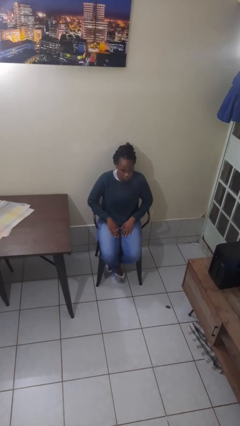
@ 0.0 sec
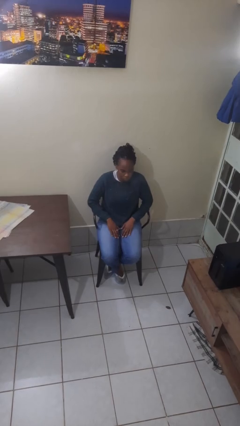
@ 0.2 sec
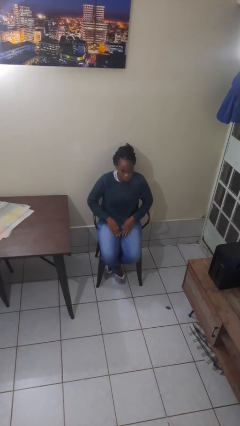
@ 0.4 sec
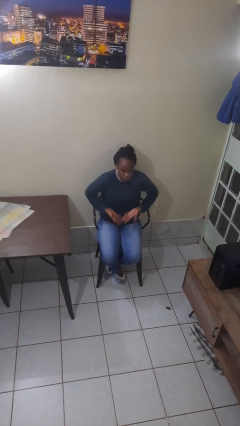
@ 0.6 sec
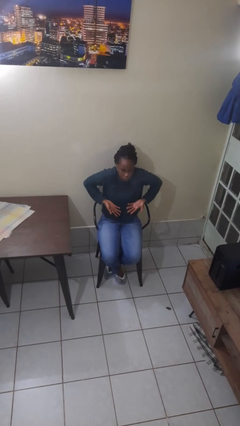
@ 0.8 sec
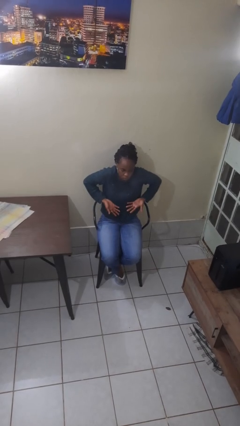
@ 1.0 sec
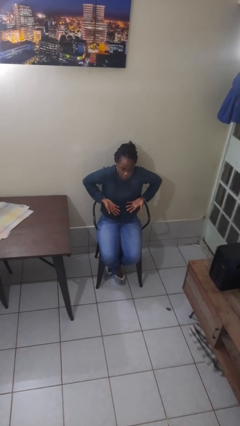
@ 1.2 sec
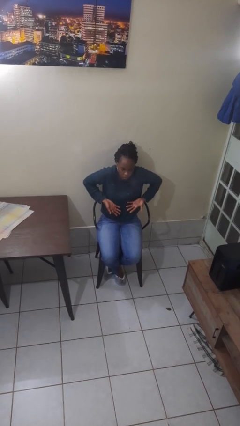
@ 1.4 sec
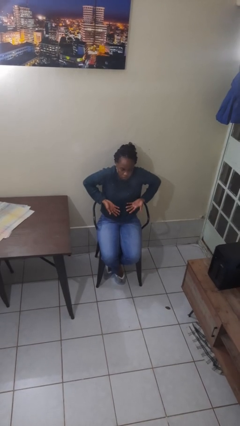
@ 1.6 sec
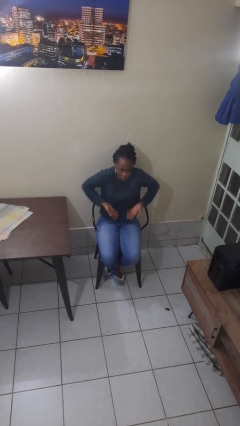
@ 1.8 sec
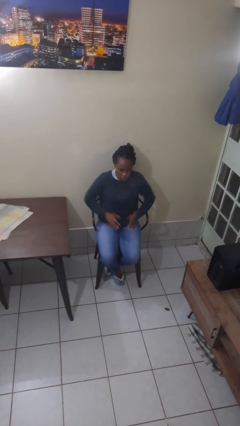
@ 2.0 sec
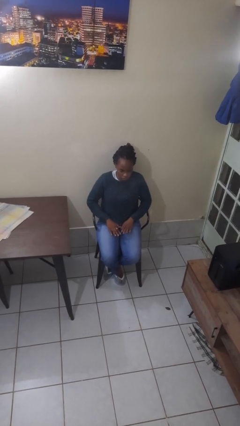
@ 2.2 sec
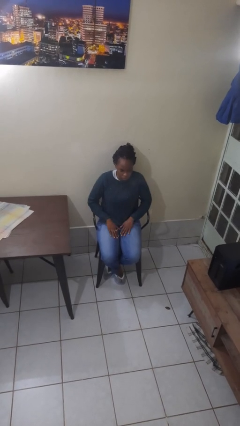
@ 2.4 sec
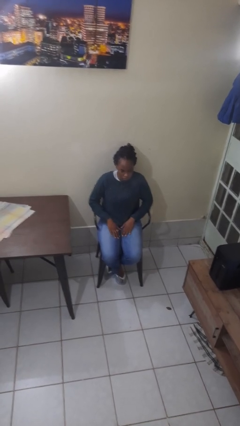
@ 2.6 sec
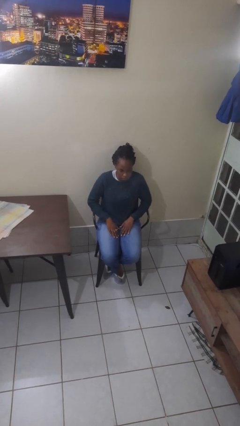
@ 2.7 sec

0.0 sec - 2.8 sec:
person shrugs

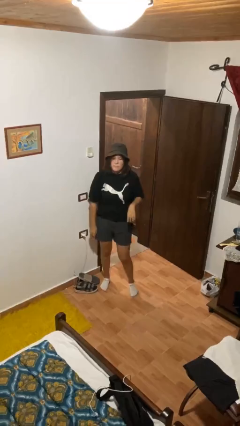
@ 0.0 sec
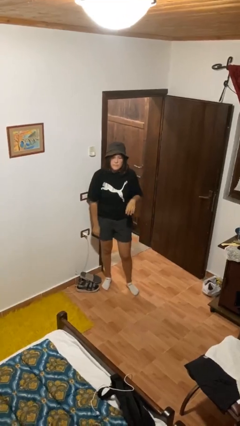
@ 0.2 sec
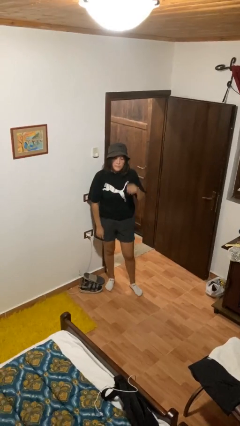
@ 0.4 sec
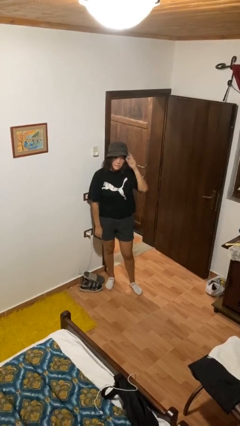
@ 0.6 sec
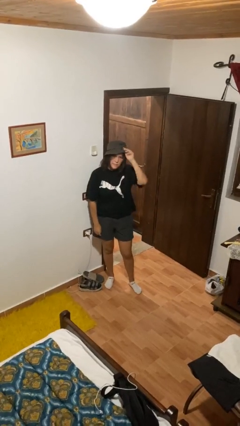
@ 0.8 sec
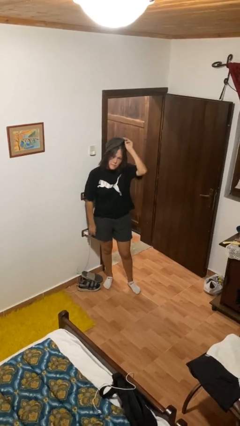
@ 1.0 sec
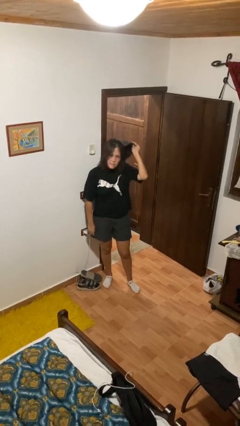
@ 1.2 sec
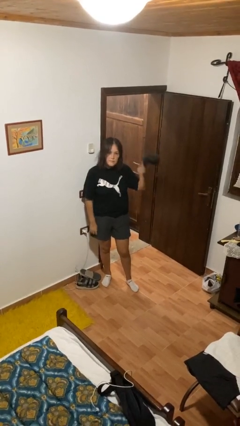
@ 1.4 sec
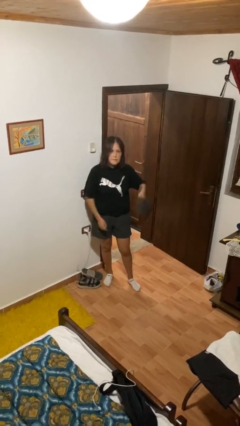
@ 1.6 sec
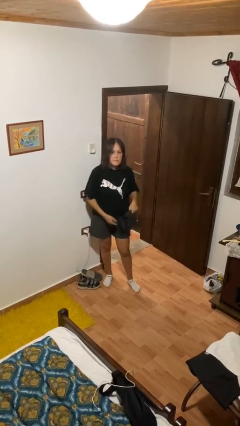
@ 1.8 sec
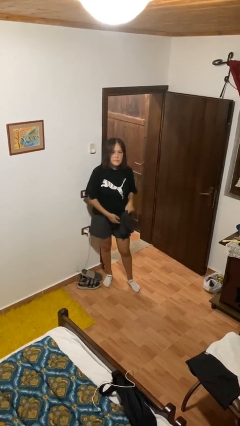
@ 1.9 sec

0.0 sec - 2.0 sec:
person takes off hat

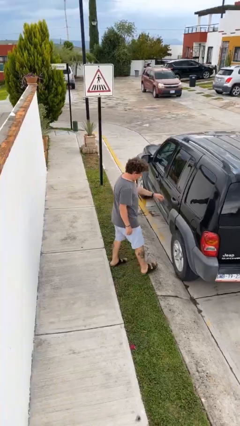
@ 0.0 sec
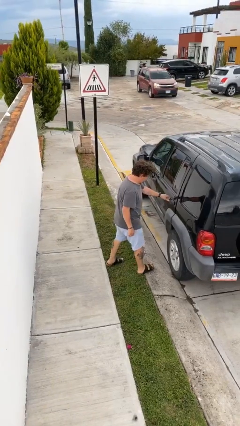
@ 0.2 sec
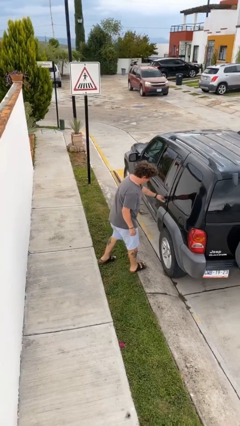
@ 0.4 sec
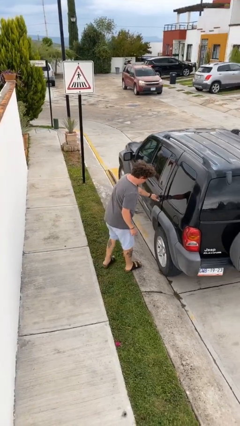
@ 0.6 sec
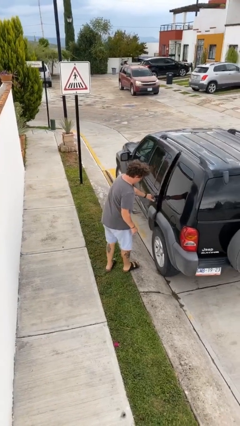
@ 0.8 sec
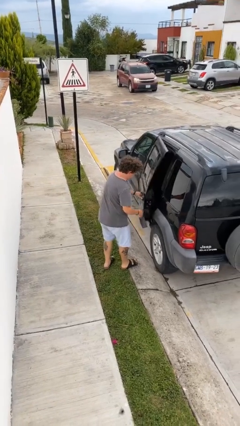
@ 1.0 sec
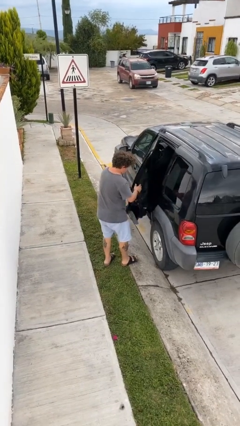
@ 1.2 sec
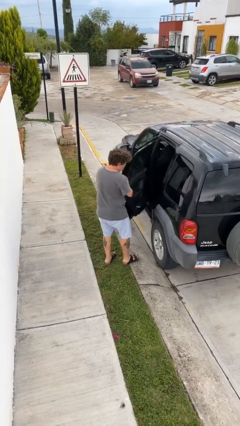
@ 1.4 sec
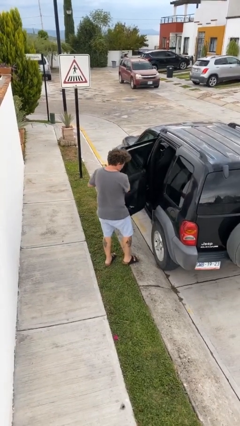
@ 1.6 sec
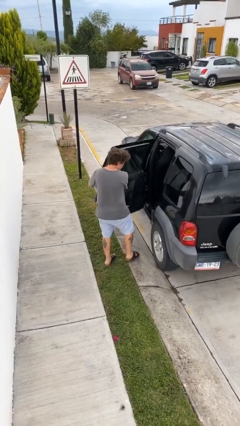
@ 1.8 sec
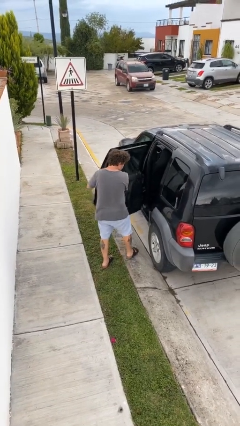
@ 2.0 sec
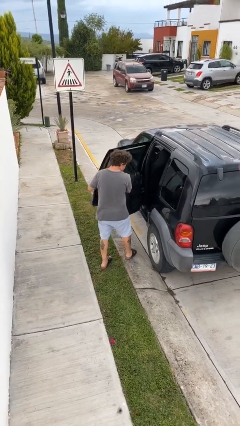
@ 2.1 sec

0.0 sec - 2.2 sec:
person opens car door

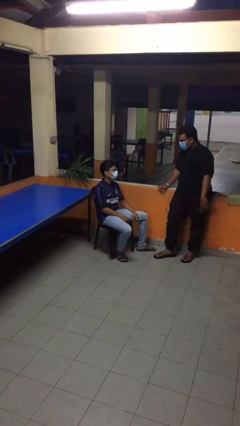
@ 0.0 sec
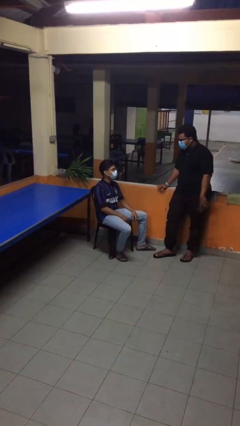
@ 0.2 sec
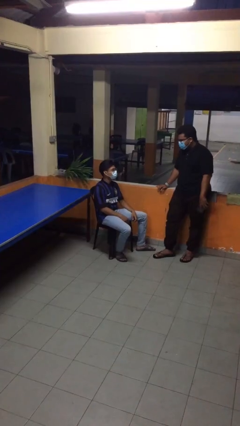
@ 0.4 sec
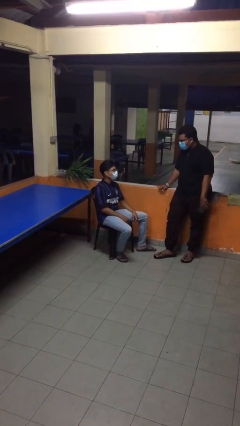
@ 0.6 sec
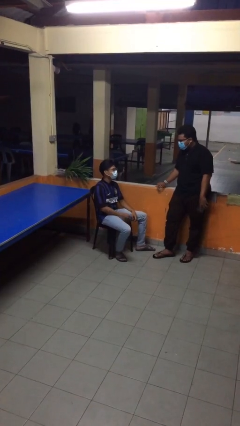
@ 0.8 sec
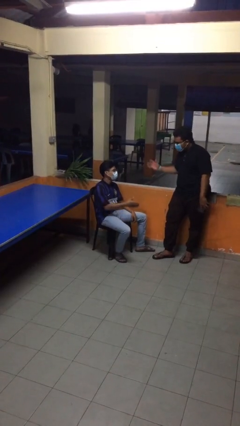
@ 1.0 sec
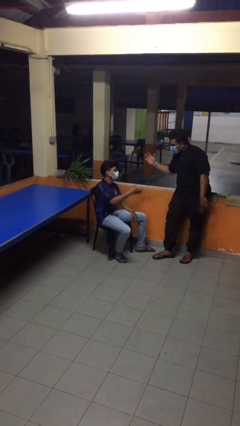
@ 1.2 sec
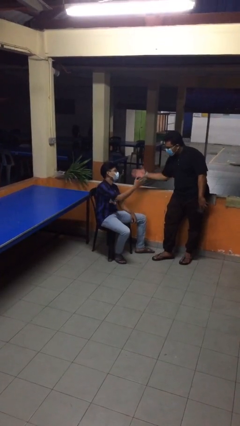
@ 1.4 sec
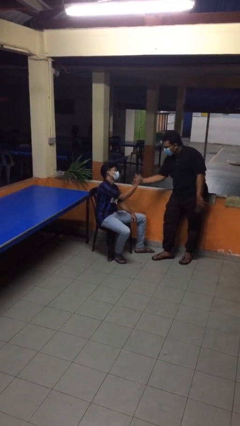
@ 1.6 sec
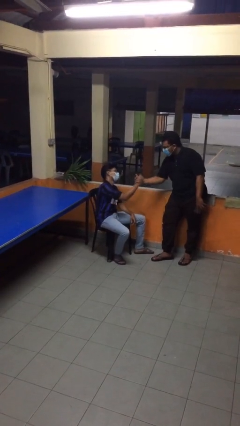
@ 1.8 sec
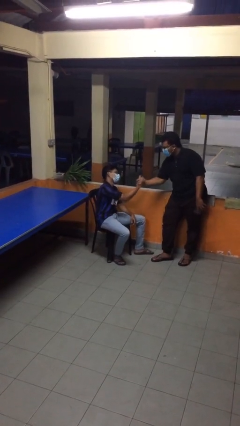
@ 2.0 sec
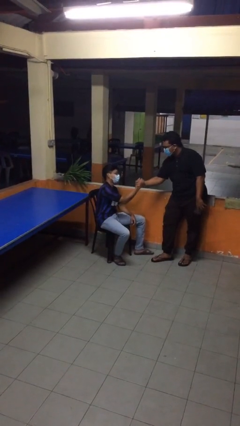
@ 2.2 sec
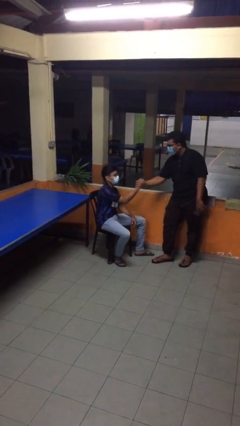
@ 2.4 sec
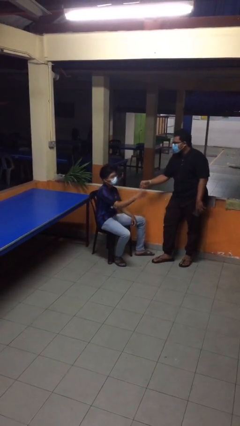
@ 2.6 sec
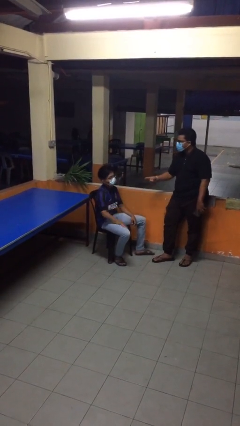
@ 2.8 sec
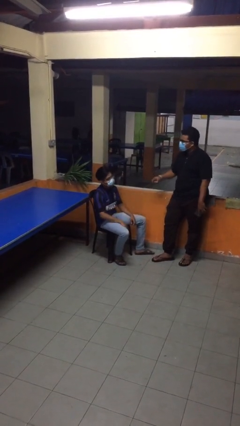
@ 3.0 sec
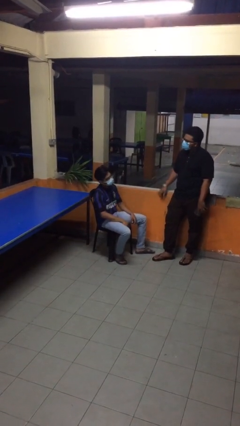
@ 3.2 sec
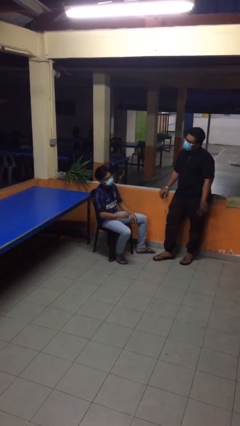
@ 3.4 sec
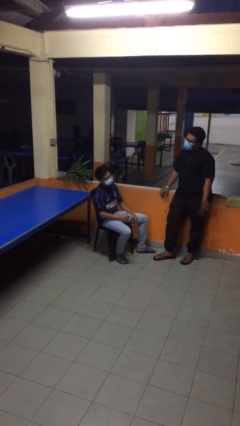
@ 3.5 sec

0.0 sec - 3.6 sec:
person shakes hand

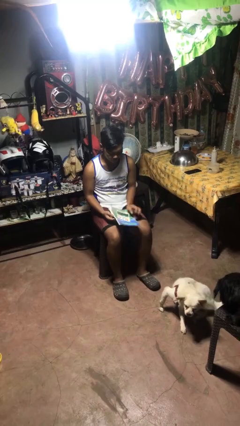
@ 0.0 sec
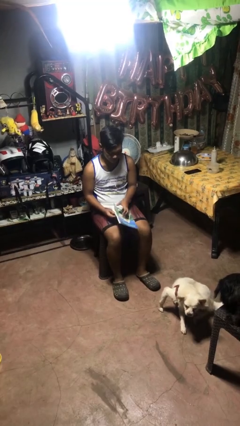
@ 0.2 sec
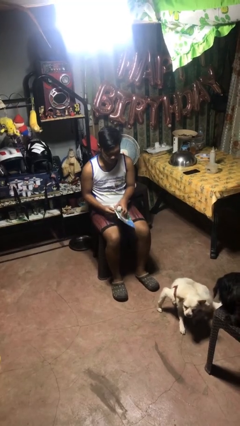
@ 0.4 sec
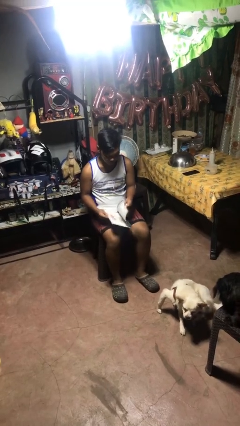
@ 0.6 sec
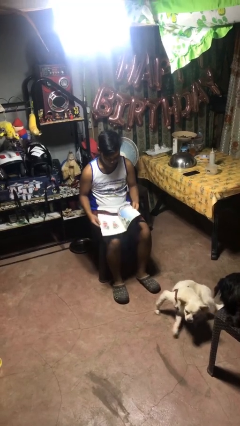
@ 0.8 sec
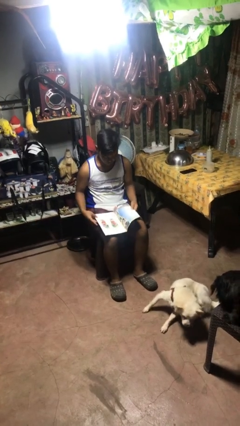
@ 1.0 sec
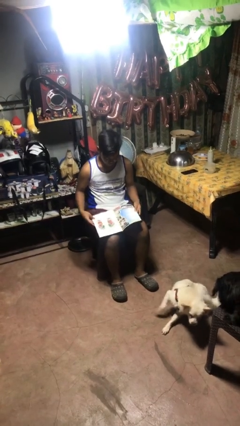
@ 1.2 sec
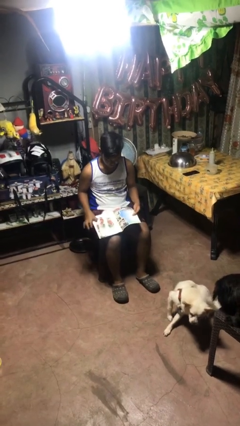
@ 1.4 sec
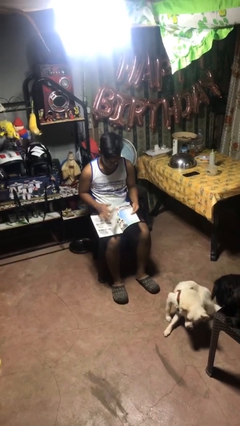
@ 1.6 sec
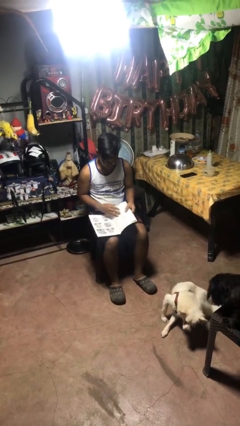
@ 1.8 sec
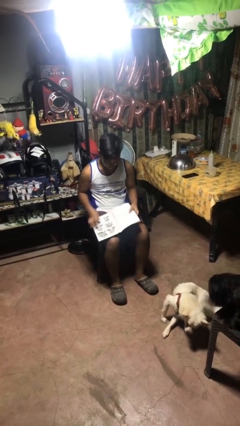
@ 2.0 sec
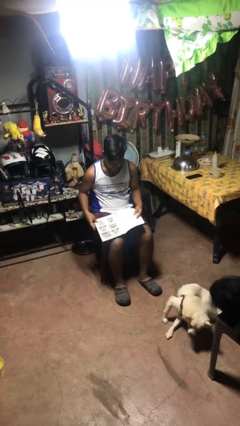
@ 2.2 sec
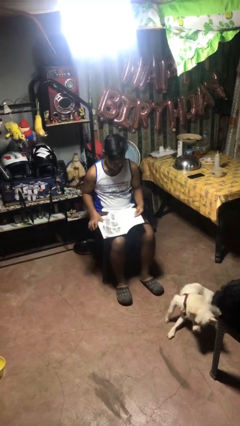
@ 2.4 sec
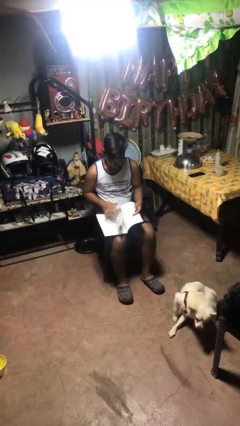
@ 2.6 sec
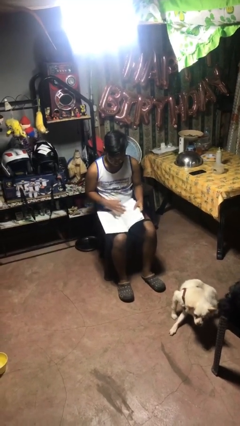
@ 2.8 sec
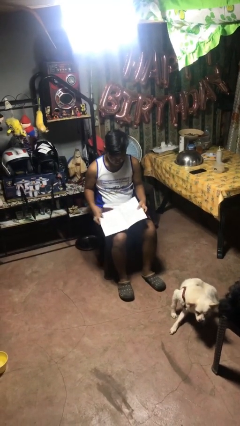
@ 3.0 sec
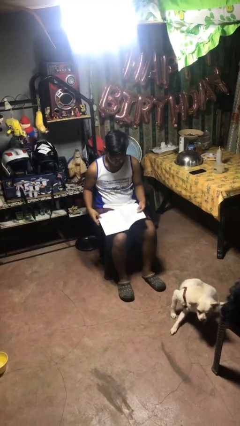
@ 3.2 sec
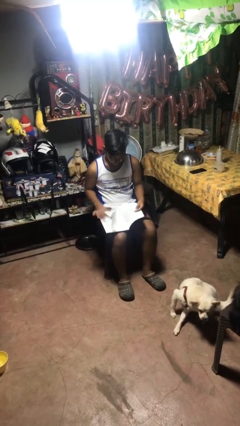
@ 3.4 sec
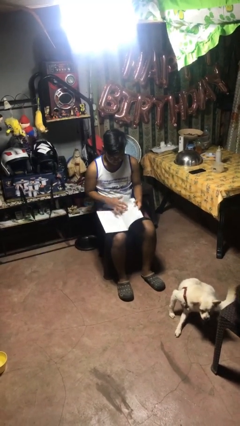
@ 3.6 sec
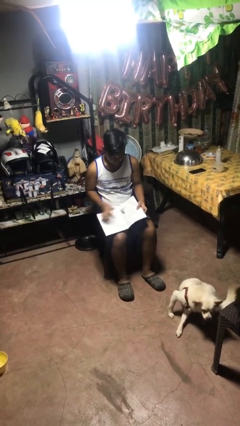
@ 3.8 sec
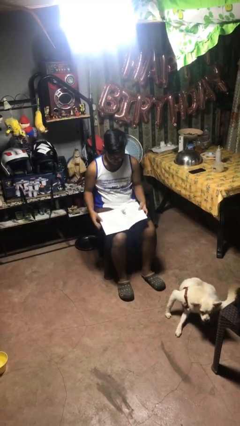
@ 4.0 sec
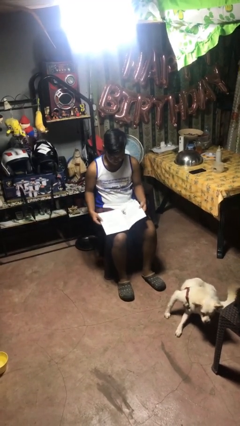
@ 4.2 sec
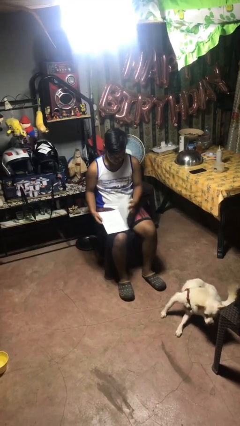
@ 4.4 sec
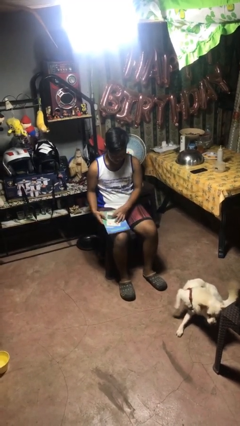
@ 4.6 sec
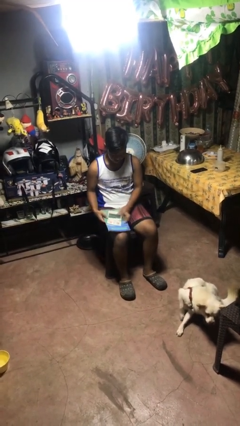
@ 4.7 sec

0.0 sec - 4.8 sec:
person reads magazine

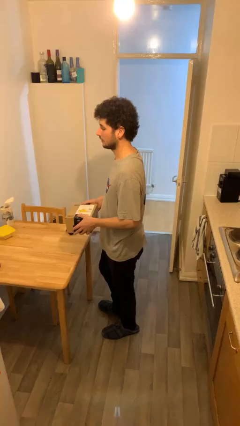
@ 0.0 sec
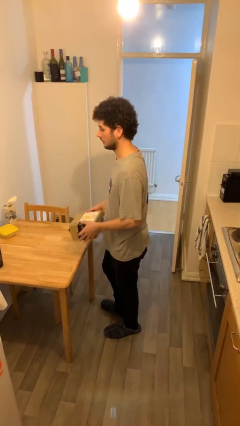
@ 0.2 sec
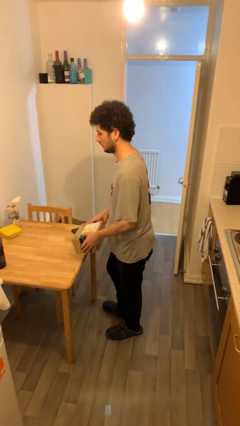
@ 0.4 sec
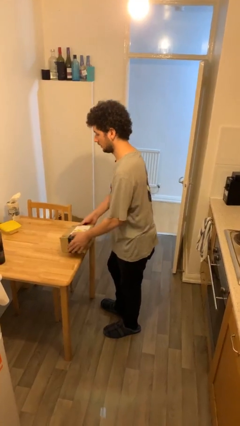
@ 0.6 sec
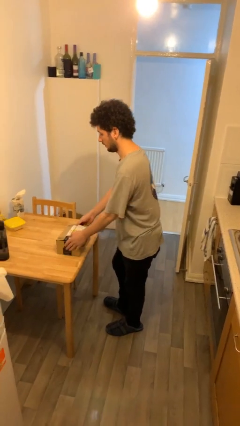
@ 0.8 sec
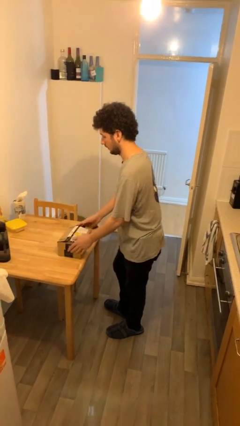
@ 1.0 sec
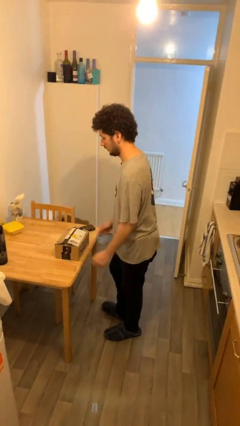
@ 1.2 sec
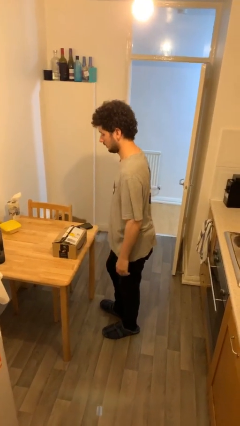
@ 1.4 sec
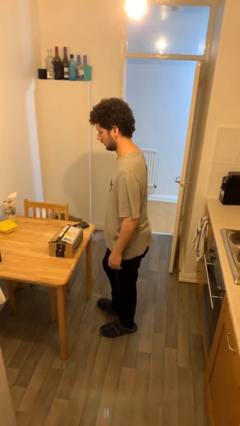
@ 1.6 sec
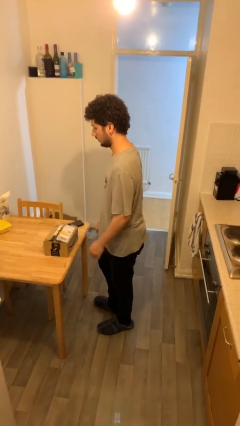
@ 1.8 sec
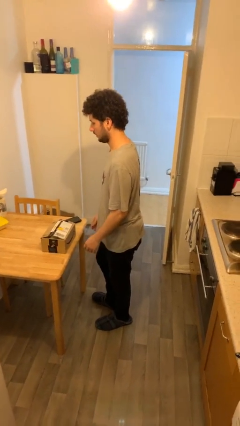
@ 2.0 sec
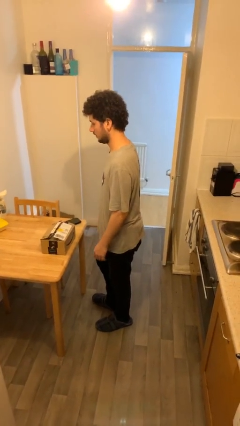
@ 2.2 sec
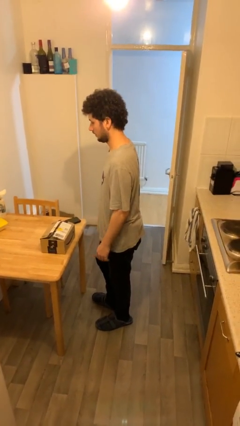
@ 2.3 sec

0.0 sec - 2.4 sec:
person puts down object on table
